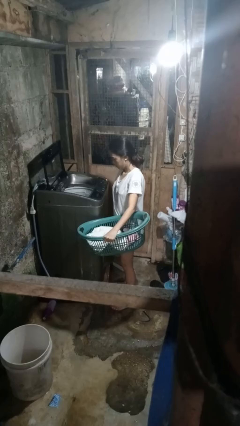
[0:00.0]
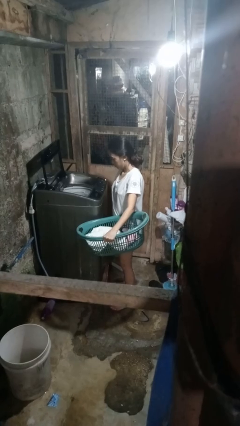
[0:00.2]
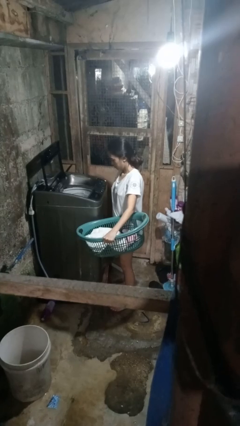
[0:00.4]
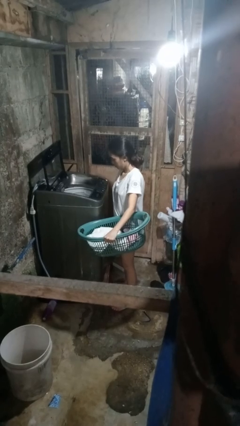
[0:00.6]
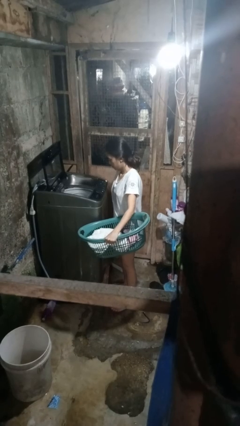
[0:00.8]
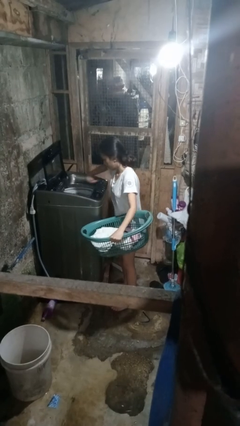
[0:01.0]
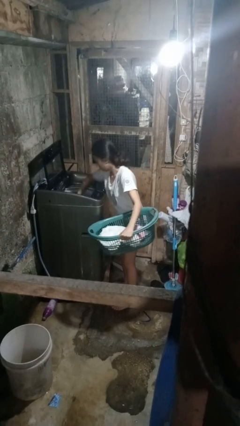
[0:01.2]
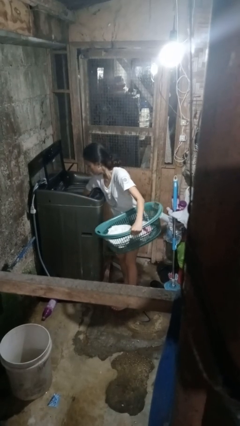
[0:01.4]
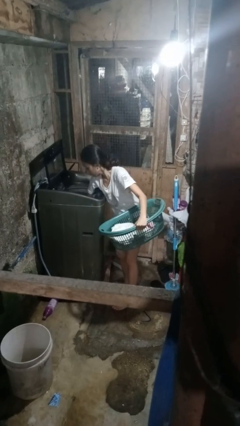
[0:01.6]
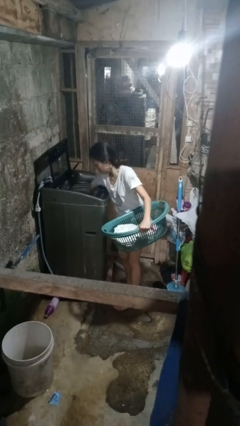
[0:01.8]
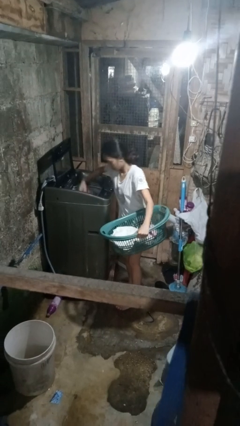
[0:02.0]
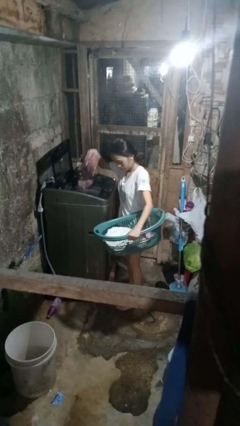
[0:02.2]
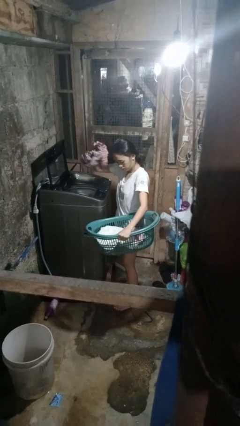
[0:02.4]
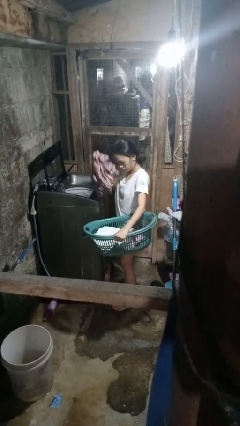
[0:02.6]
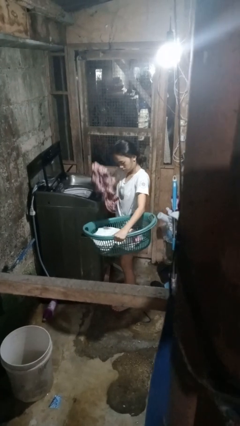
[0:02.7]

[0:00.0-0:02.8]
person unloads clotheswasher

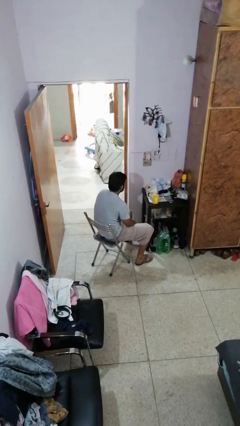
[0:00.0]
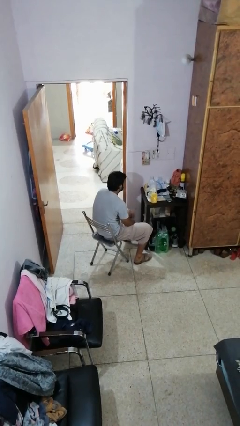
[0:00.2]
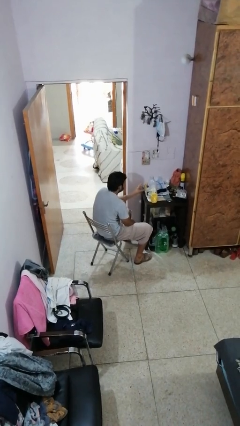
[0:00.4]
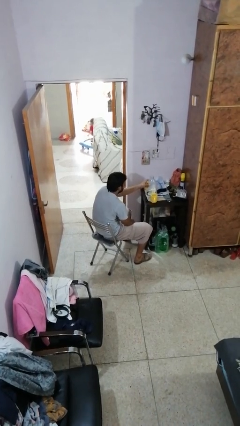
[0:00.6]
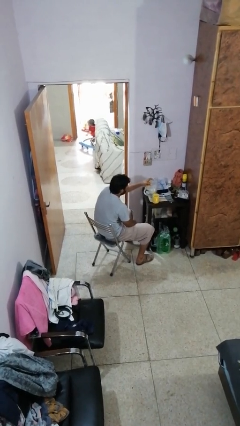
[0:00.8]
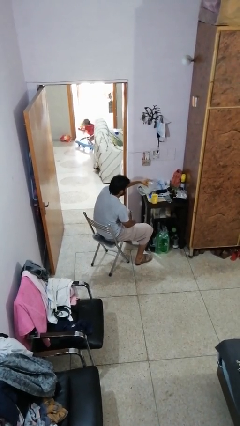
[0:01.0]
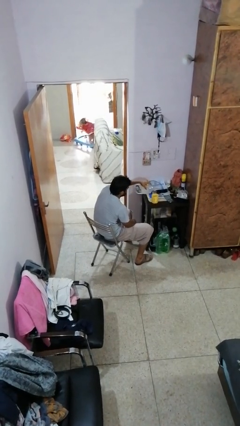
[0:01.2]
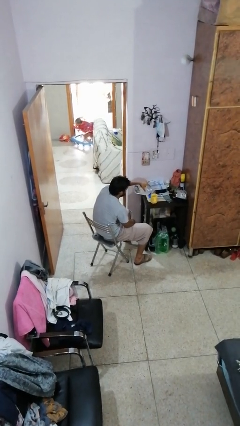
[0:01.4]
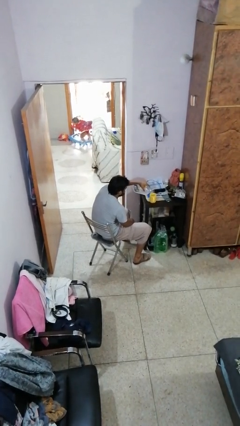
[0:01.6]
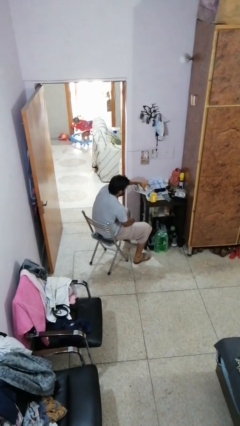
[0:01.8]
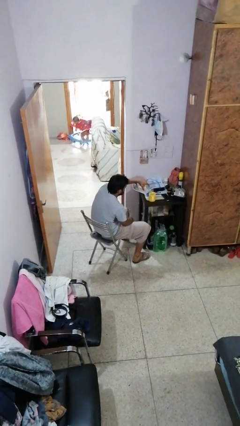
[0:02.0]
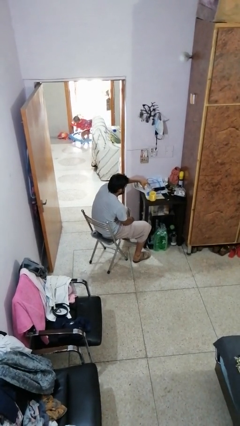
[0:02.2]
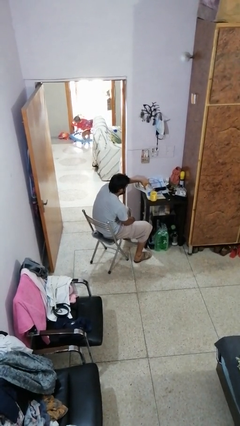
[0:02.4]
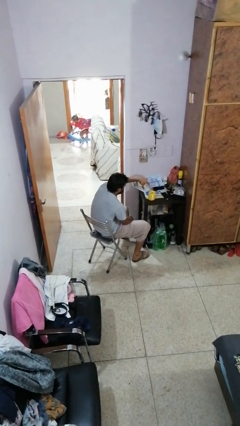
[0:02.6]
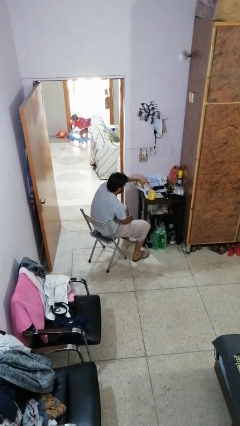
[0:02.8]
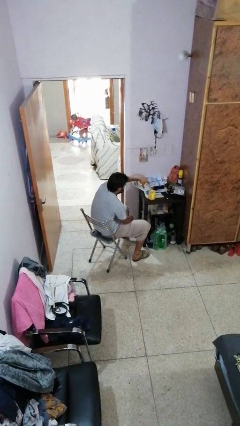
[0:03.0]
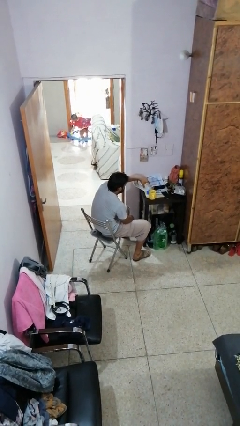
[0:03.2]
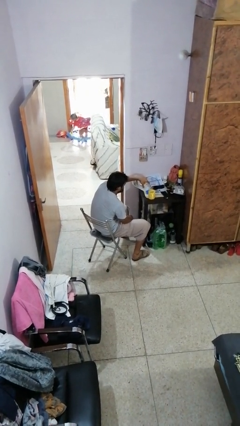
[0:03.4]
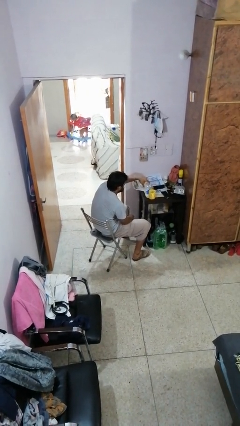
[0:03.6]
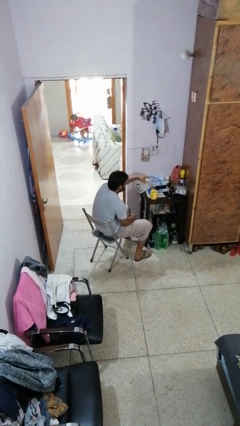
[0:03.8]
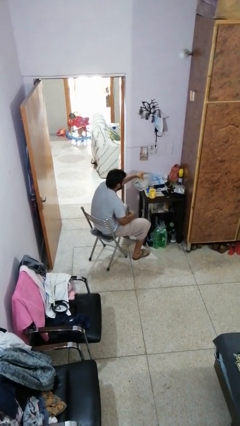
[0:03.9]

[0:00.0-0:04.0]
person pours liquid into cup

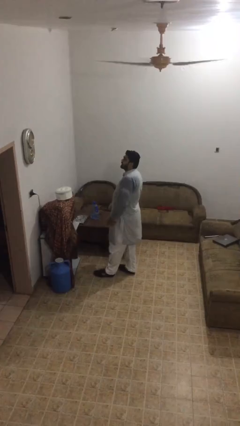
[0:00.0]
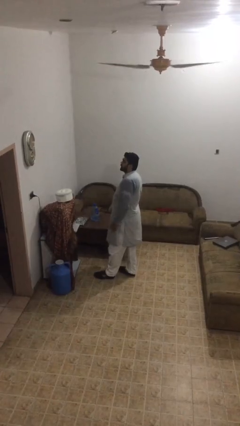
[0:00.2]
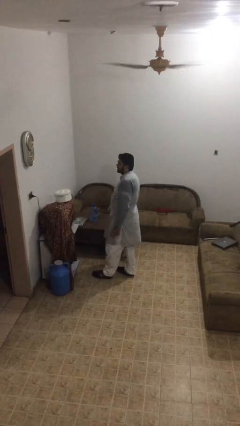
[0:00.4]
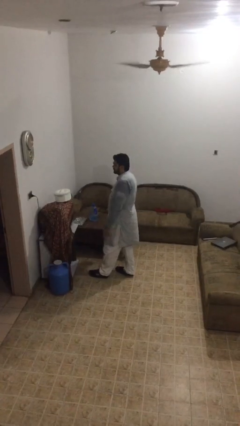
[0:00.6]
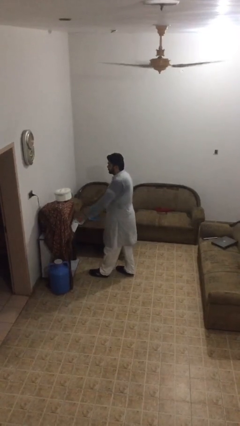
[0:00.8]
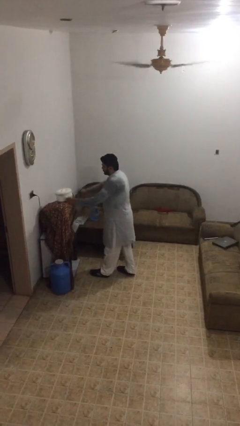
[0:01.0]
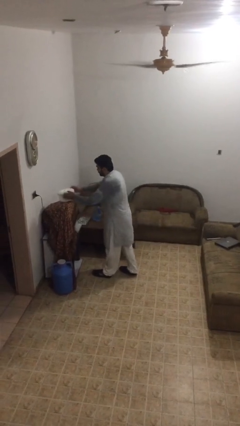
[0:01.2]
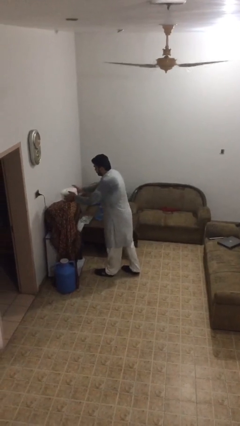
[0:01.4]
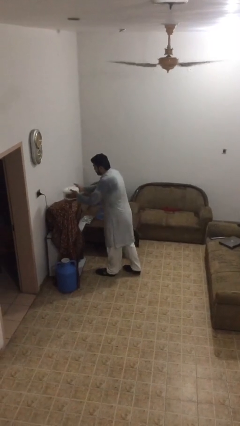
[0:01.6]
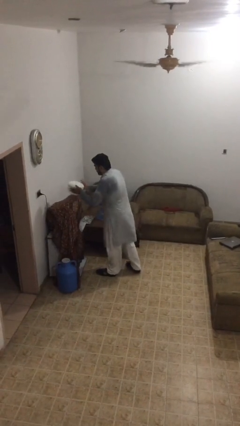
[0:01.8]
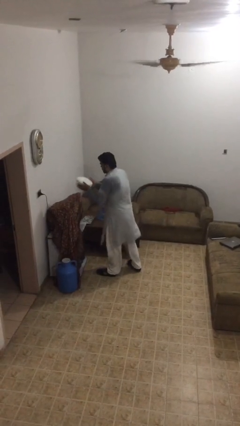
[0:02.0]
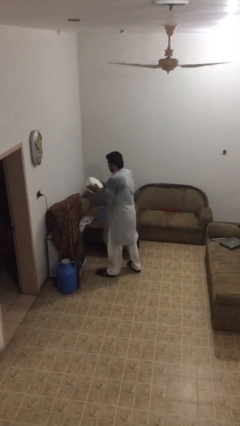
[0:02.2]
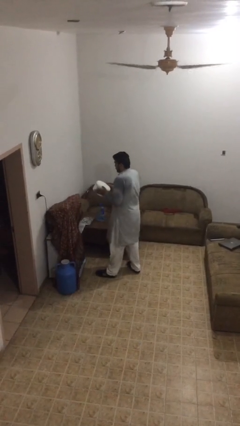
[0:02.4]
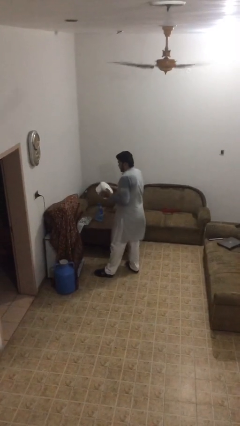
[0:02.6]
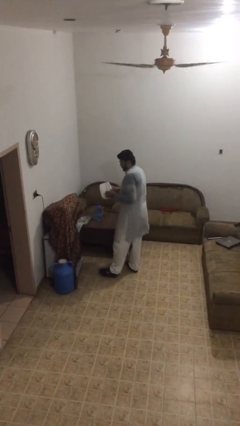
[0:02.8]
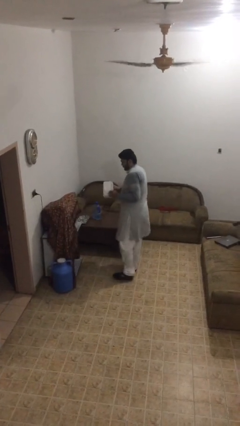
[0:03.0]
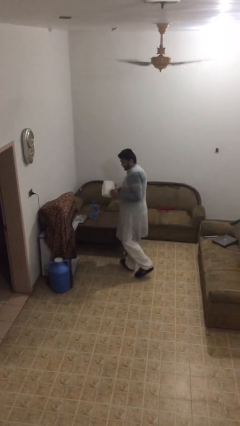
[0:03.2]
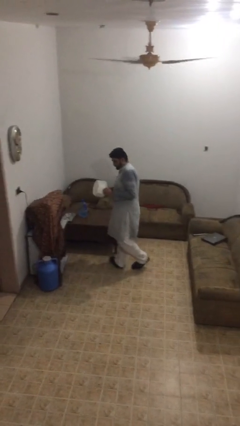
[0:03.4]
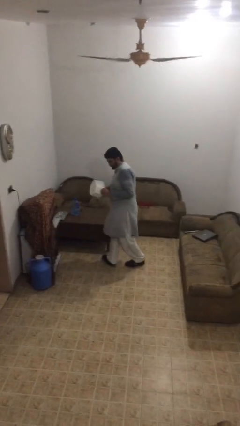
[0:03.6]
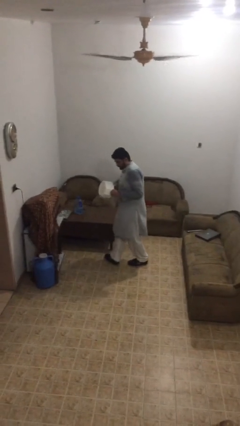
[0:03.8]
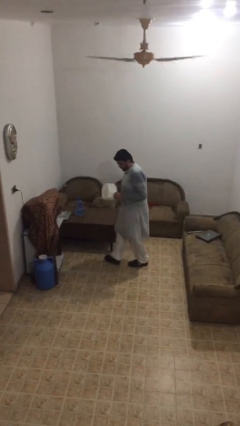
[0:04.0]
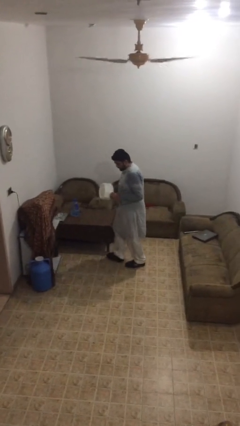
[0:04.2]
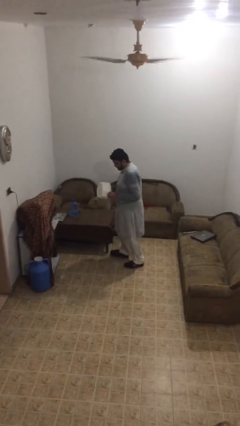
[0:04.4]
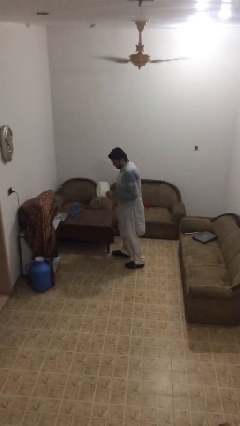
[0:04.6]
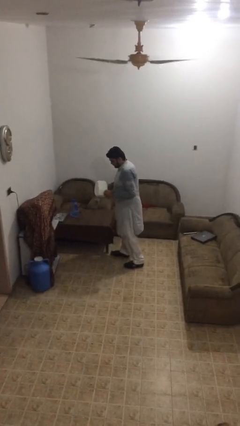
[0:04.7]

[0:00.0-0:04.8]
person picks up object from shelf

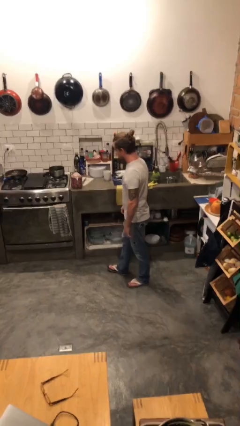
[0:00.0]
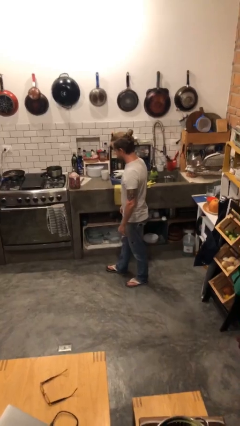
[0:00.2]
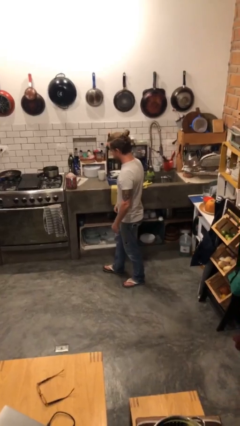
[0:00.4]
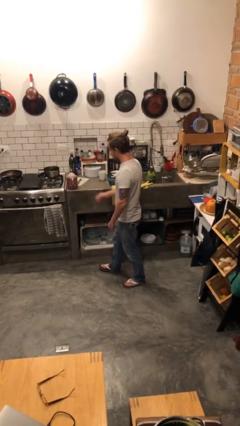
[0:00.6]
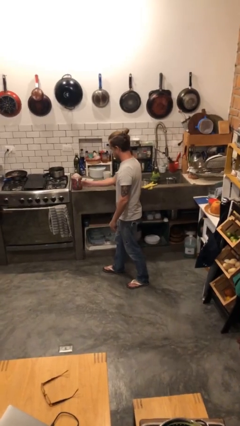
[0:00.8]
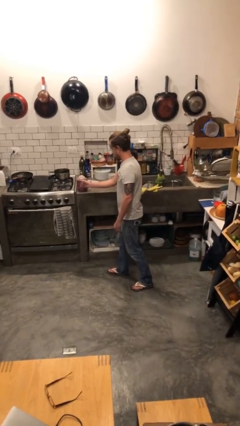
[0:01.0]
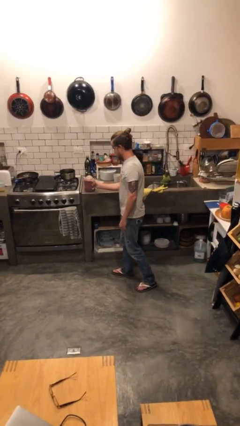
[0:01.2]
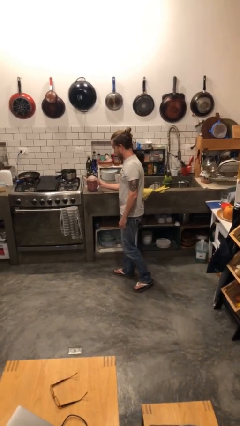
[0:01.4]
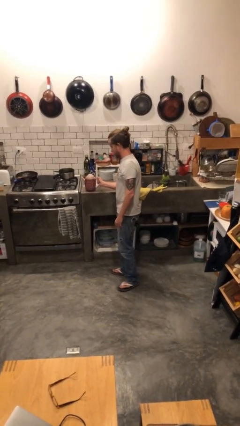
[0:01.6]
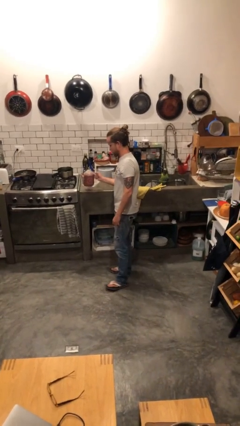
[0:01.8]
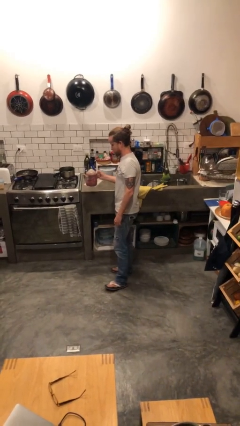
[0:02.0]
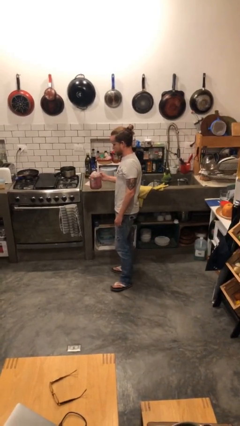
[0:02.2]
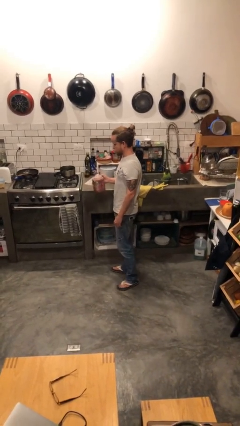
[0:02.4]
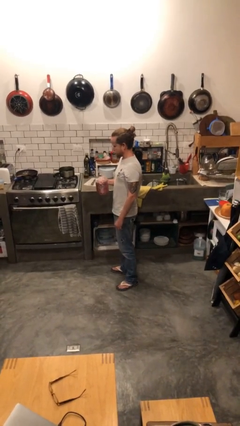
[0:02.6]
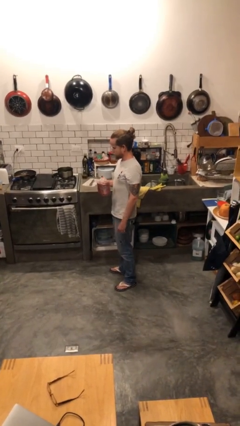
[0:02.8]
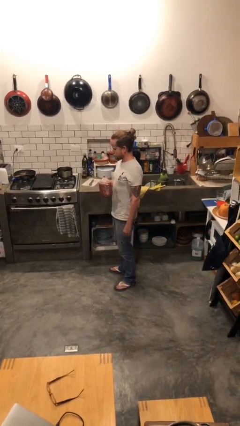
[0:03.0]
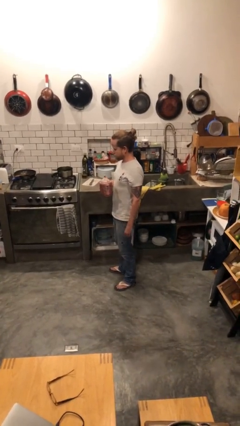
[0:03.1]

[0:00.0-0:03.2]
person picks up object from countertop

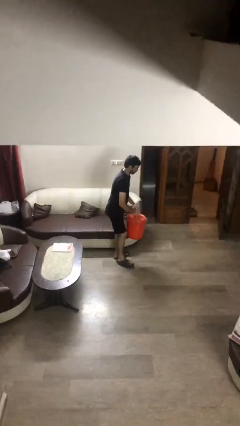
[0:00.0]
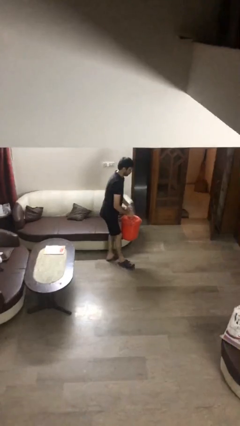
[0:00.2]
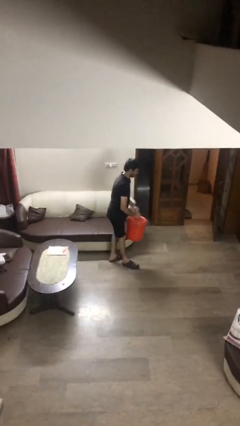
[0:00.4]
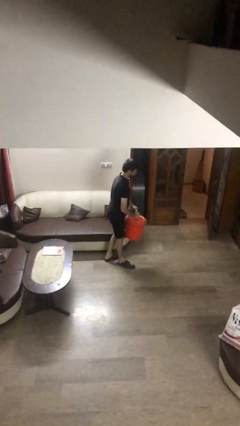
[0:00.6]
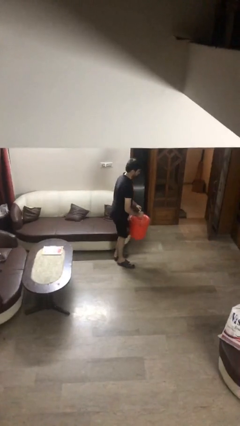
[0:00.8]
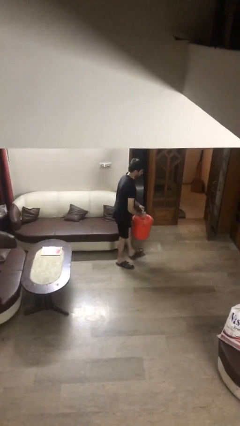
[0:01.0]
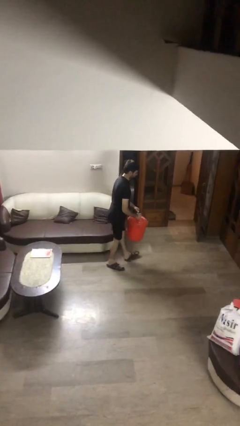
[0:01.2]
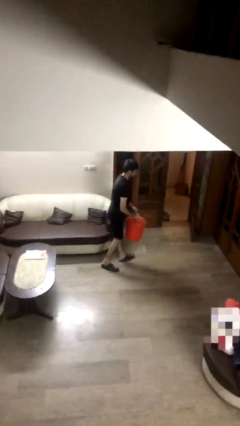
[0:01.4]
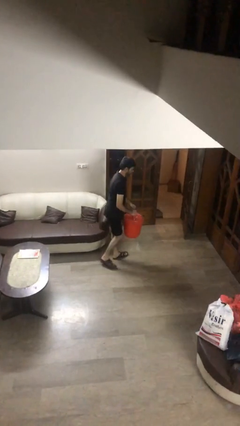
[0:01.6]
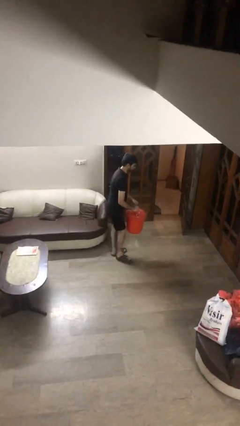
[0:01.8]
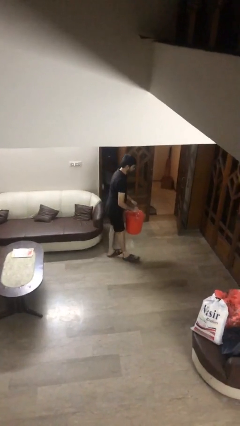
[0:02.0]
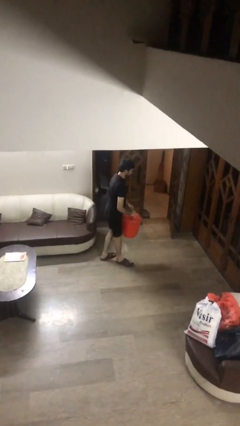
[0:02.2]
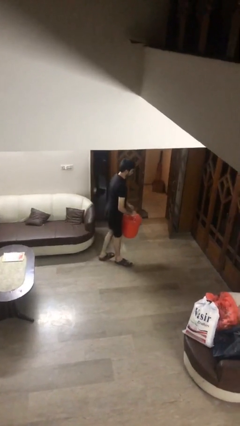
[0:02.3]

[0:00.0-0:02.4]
person carries heavy object

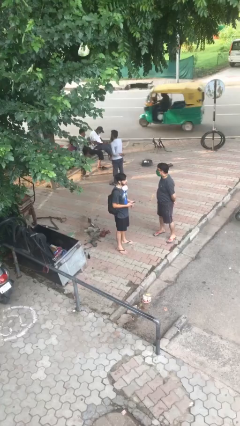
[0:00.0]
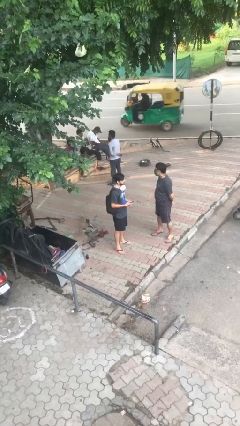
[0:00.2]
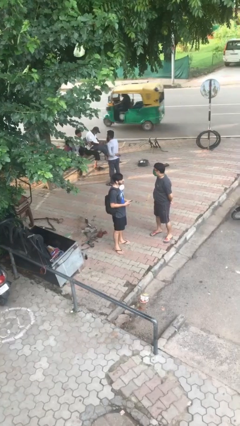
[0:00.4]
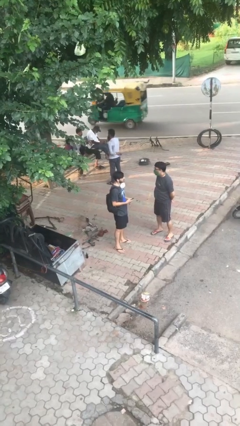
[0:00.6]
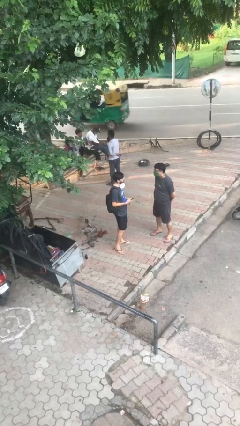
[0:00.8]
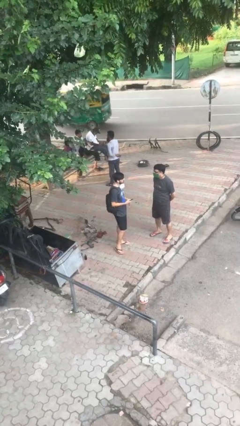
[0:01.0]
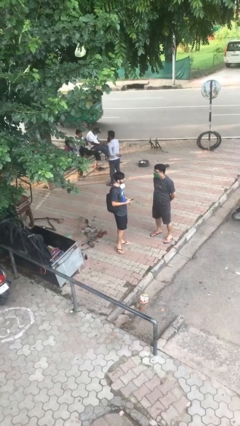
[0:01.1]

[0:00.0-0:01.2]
person talks to person
